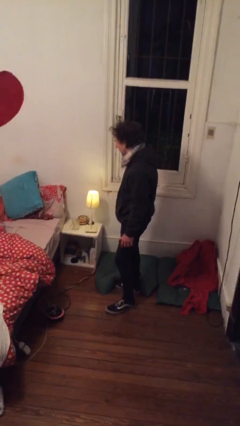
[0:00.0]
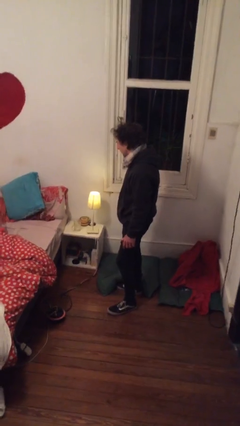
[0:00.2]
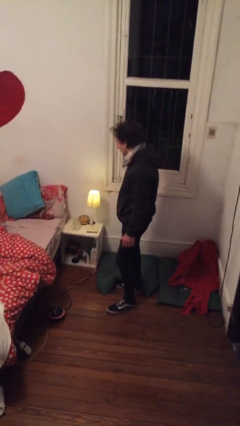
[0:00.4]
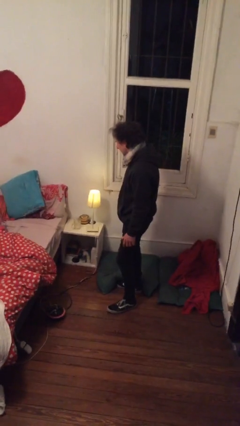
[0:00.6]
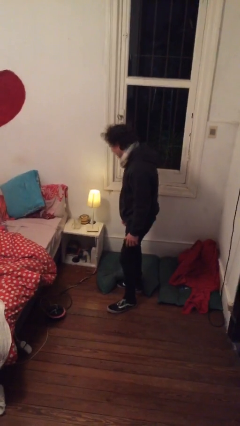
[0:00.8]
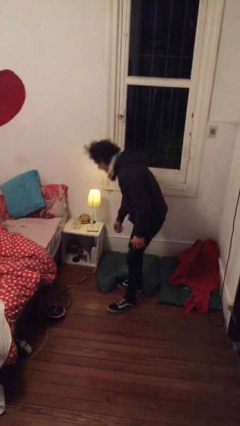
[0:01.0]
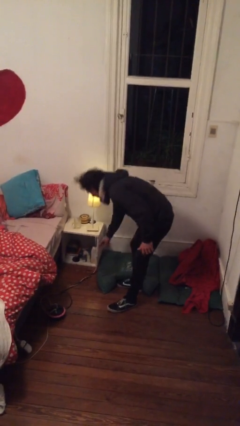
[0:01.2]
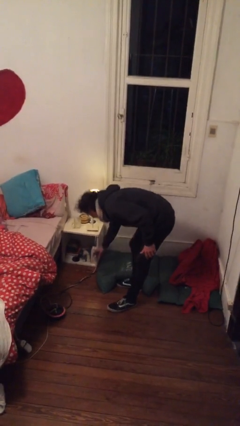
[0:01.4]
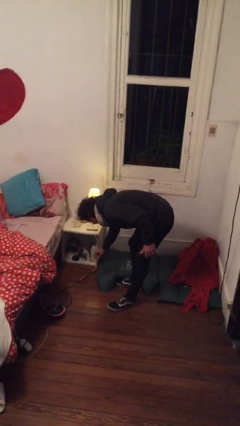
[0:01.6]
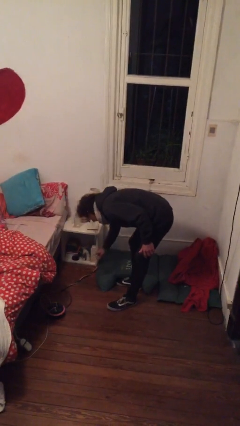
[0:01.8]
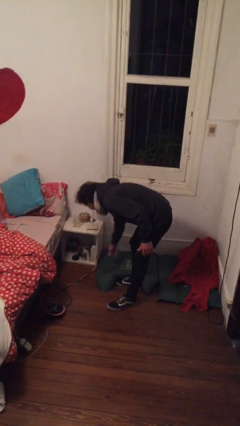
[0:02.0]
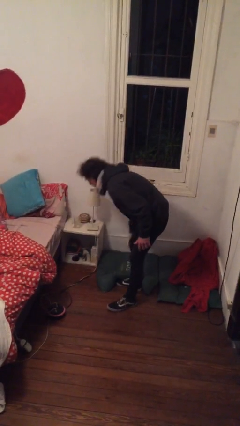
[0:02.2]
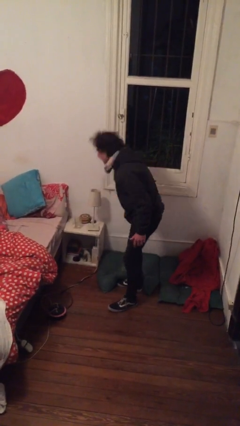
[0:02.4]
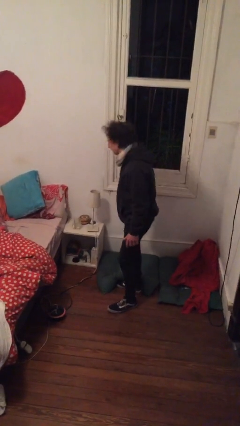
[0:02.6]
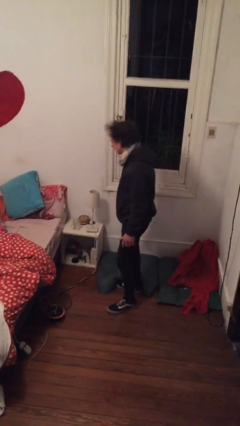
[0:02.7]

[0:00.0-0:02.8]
person turns off lamp

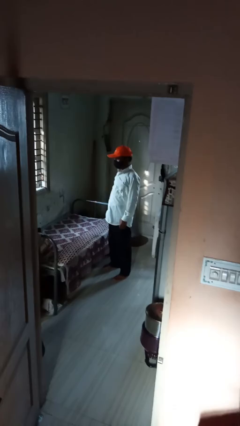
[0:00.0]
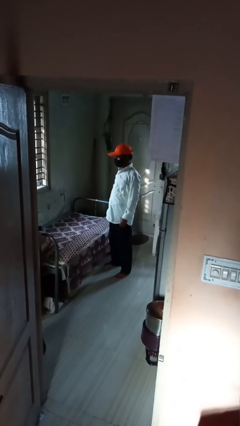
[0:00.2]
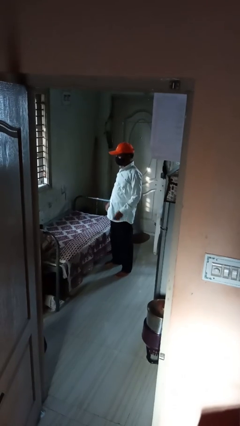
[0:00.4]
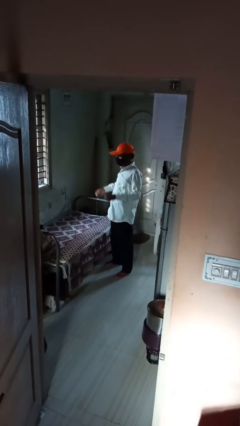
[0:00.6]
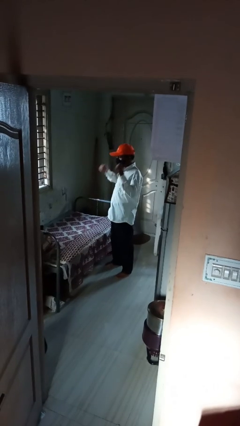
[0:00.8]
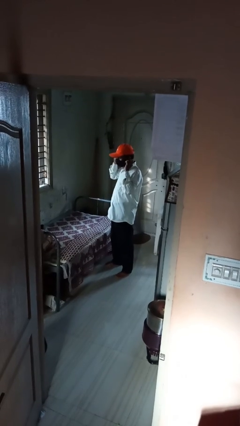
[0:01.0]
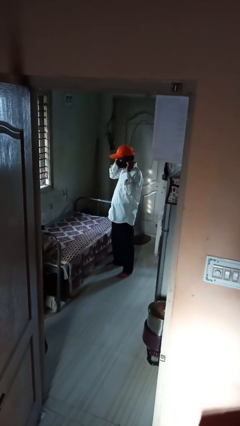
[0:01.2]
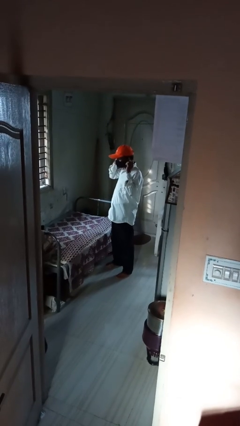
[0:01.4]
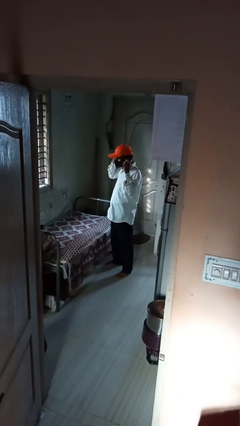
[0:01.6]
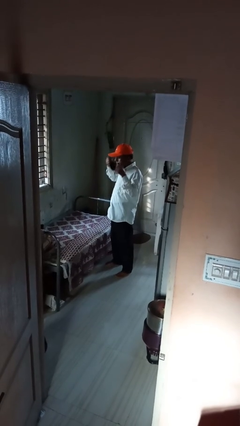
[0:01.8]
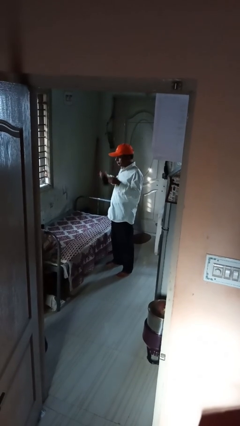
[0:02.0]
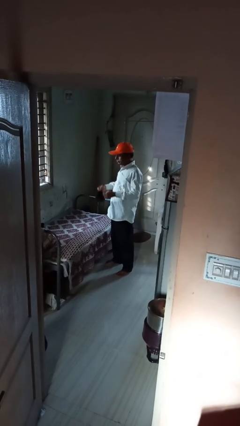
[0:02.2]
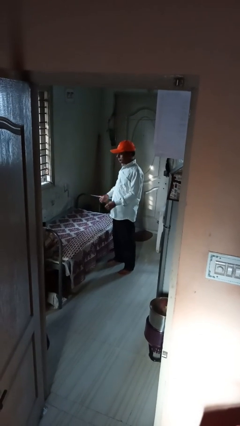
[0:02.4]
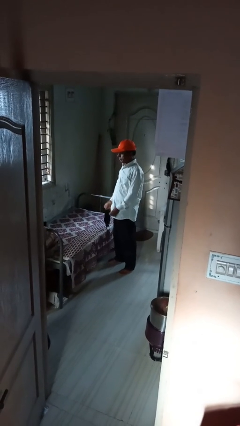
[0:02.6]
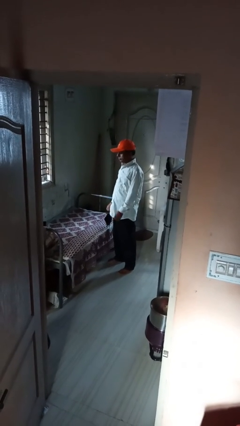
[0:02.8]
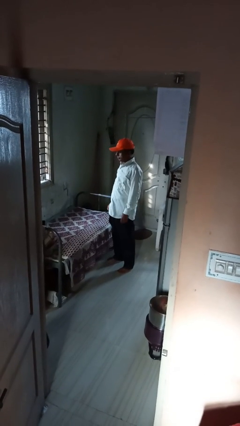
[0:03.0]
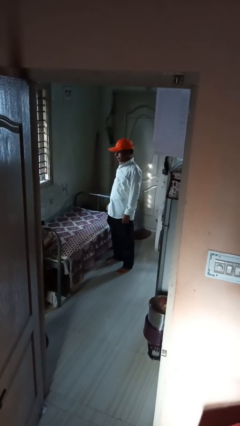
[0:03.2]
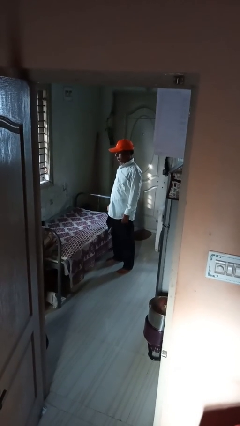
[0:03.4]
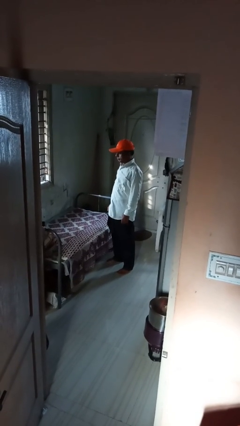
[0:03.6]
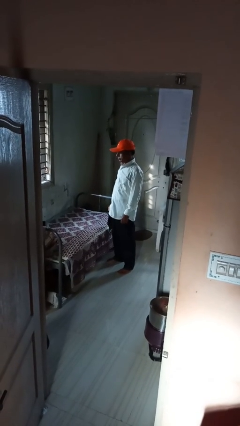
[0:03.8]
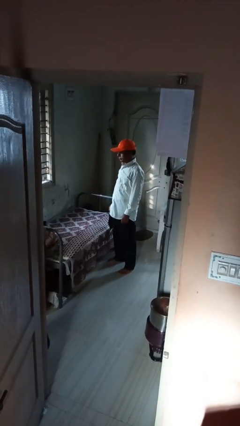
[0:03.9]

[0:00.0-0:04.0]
person takes off facemask

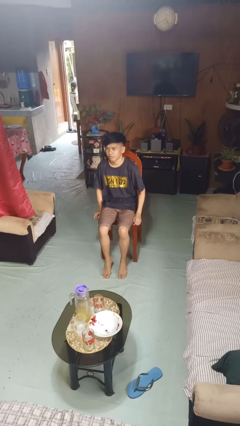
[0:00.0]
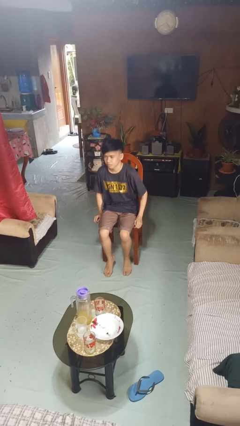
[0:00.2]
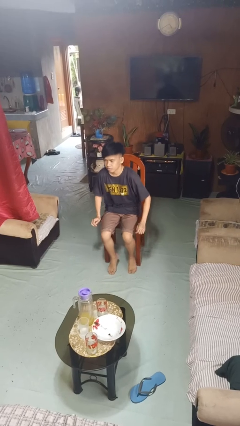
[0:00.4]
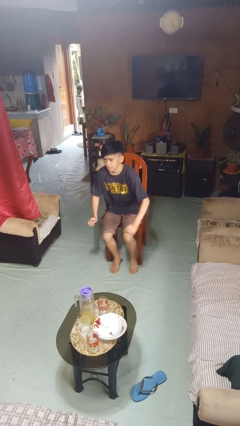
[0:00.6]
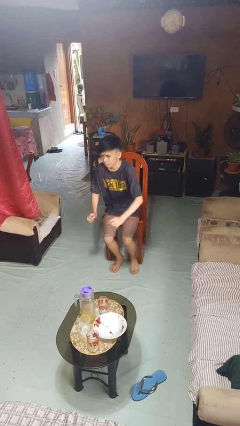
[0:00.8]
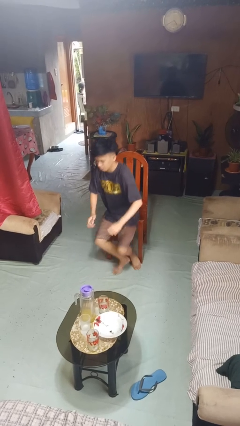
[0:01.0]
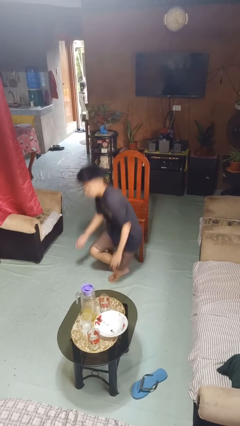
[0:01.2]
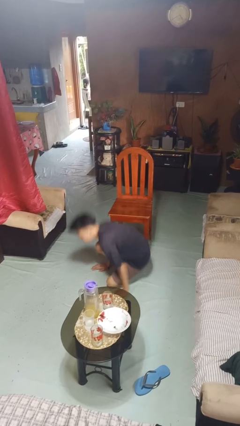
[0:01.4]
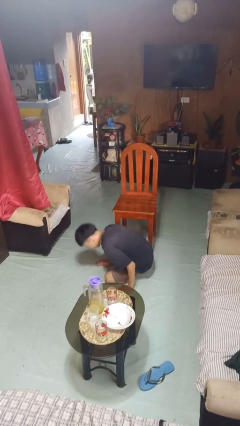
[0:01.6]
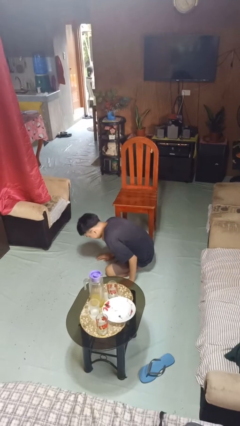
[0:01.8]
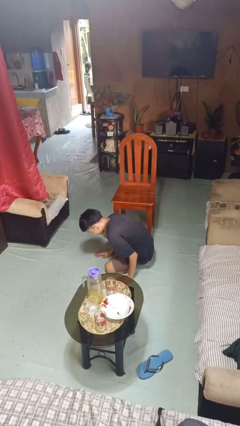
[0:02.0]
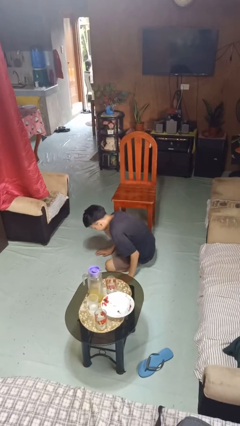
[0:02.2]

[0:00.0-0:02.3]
person falls from chair

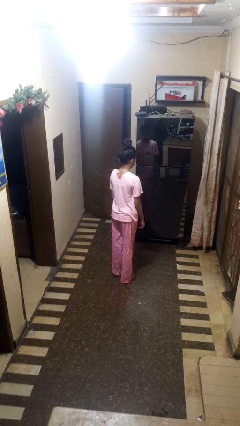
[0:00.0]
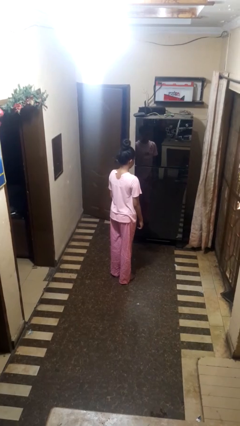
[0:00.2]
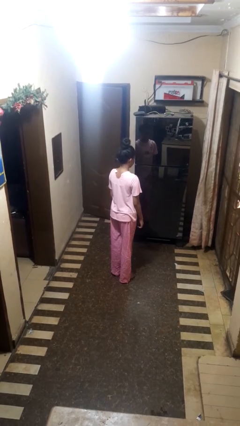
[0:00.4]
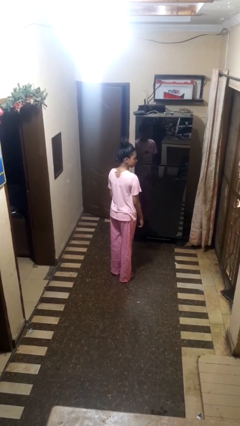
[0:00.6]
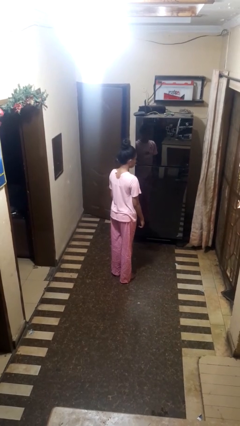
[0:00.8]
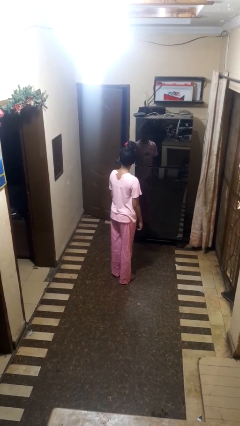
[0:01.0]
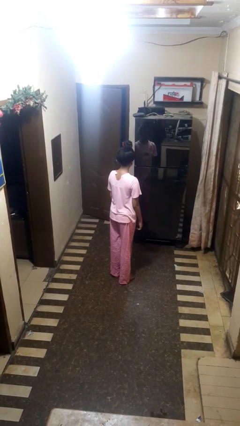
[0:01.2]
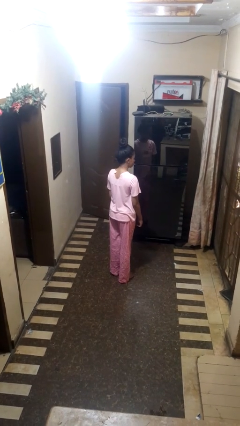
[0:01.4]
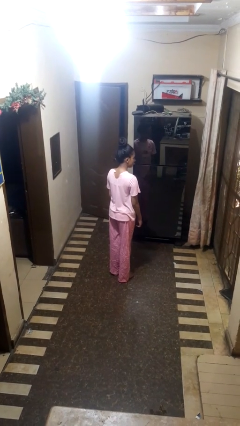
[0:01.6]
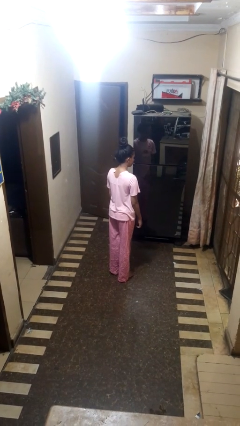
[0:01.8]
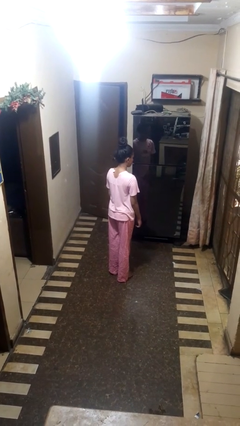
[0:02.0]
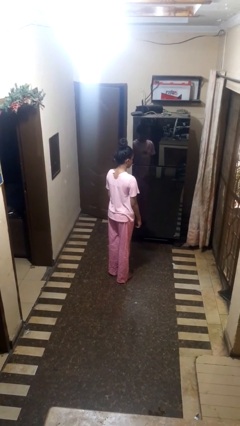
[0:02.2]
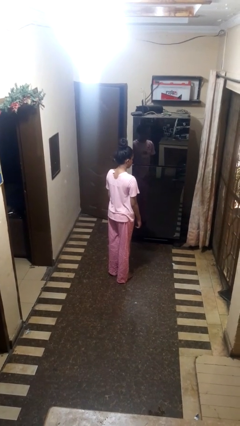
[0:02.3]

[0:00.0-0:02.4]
person nods head

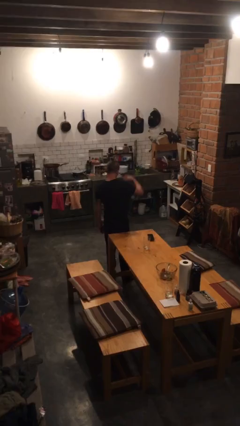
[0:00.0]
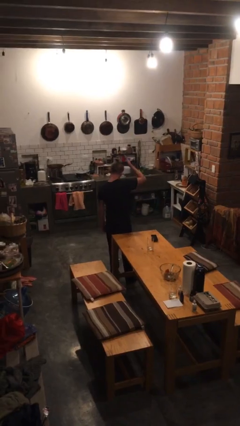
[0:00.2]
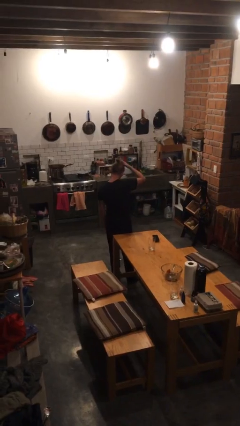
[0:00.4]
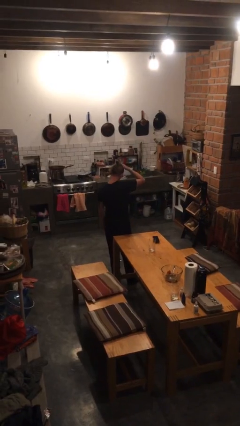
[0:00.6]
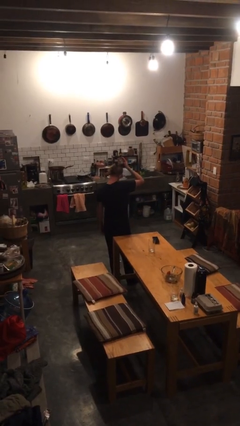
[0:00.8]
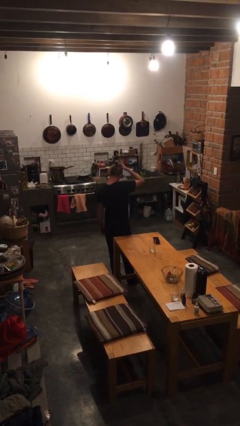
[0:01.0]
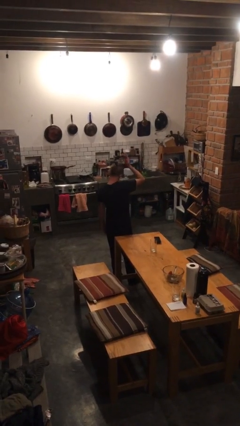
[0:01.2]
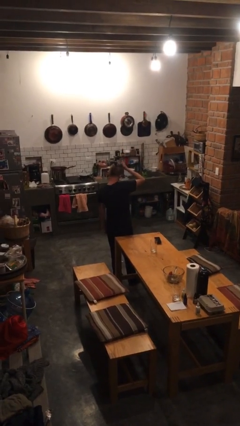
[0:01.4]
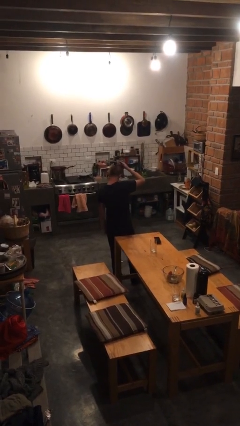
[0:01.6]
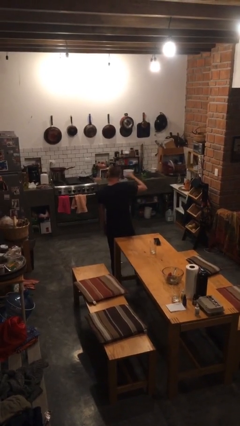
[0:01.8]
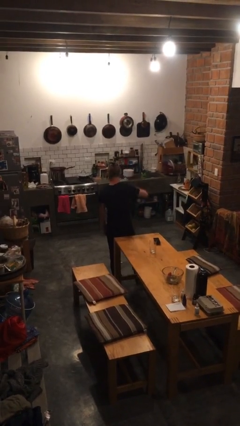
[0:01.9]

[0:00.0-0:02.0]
person pats head

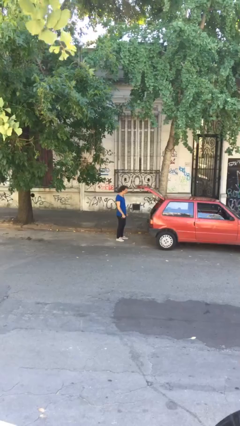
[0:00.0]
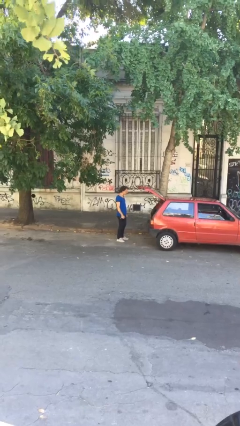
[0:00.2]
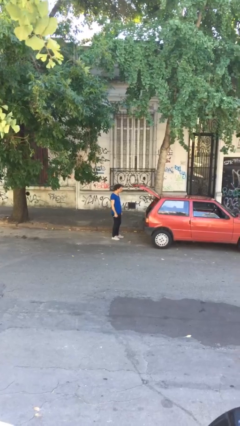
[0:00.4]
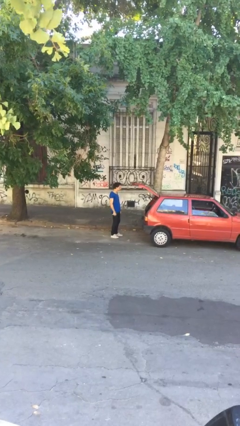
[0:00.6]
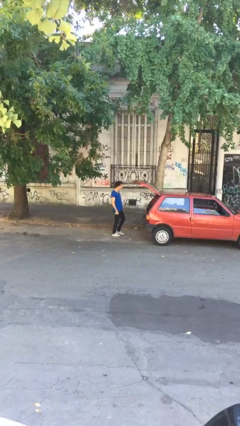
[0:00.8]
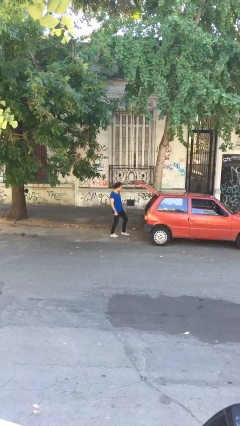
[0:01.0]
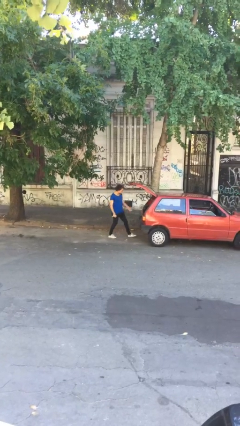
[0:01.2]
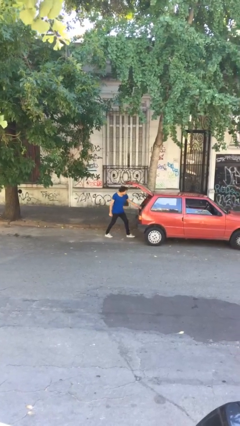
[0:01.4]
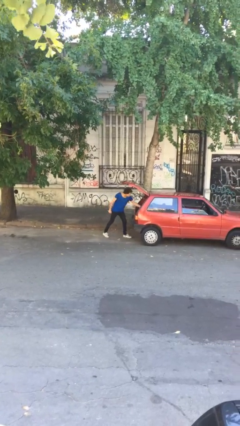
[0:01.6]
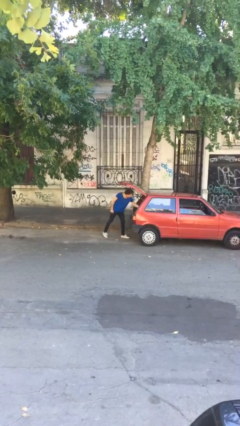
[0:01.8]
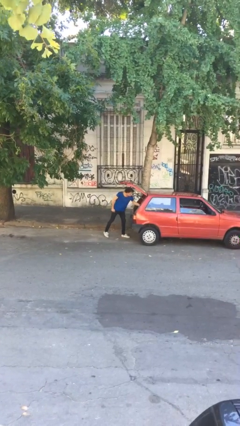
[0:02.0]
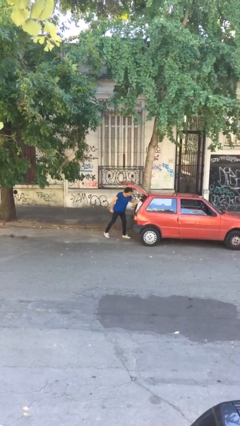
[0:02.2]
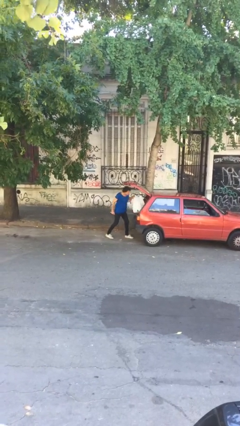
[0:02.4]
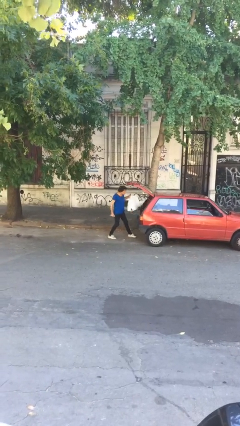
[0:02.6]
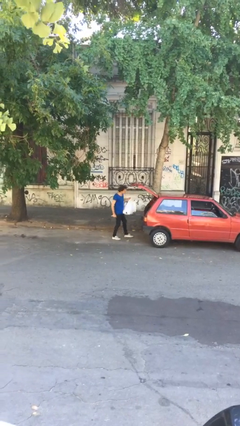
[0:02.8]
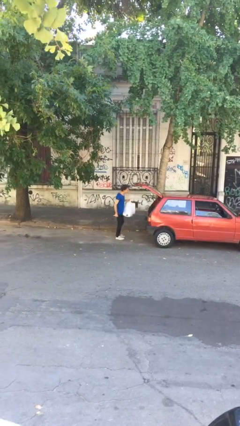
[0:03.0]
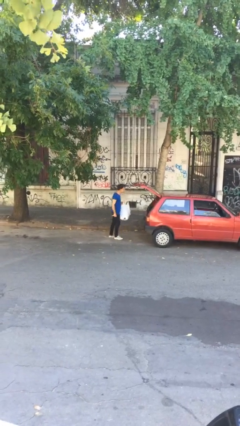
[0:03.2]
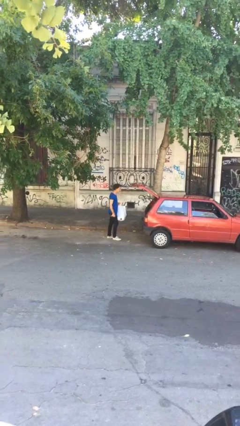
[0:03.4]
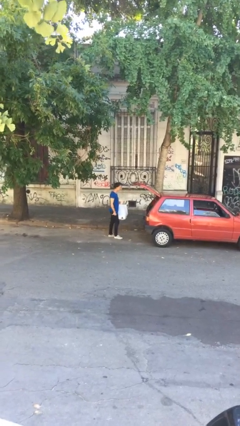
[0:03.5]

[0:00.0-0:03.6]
person unloads car
